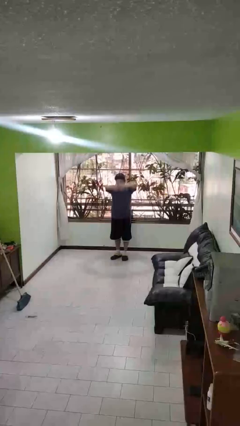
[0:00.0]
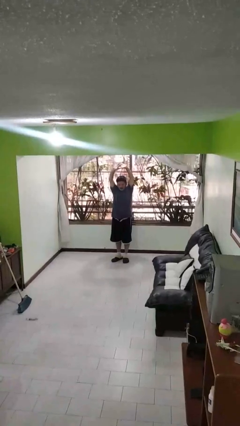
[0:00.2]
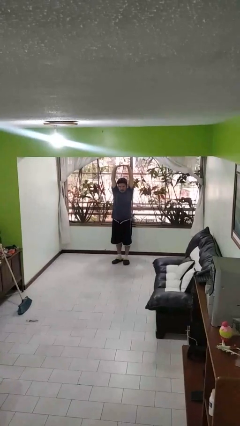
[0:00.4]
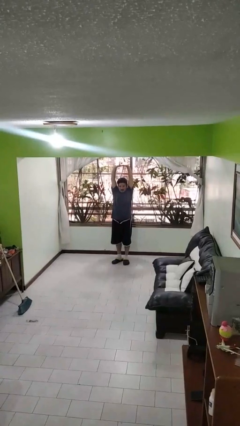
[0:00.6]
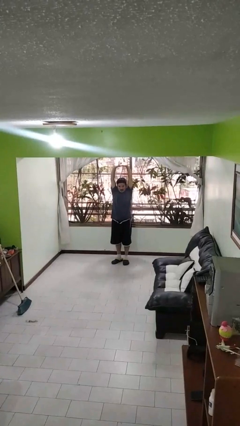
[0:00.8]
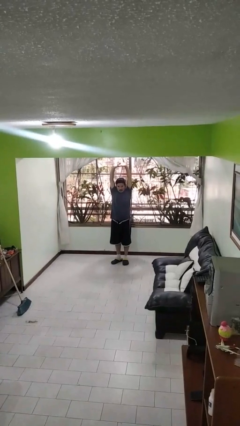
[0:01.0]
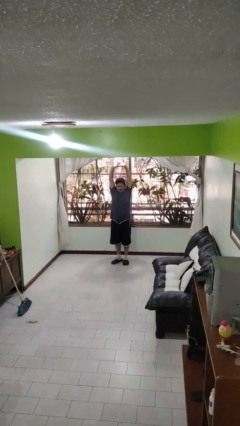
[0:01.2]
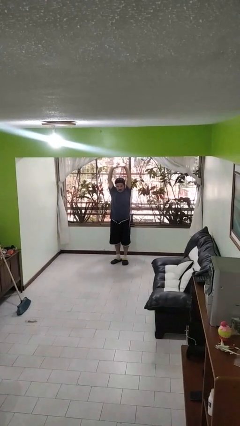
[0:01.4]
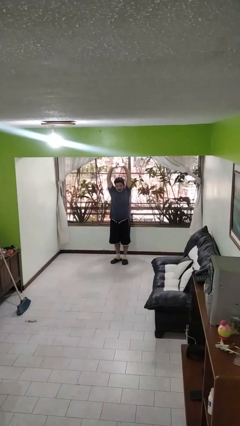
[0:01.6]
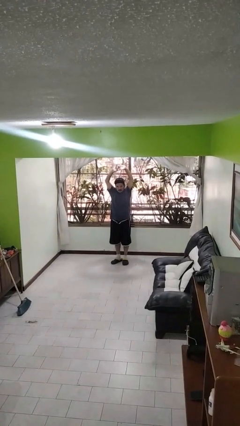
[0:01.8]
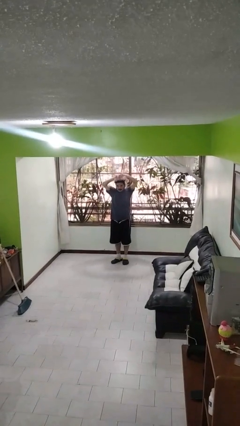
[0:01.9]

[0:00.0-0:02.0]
person stretches arms over head

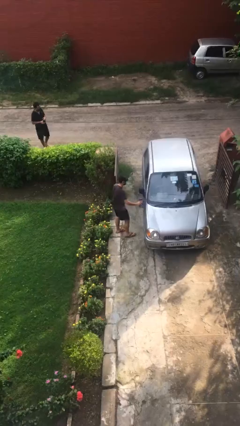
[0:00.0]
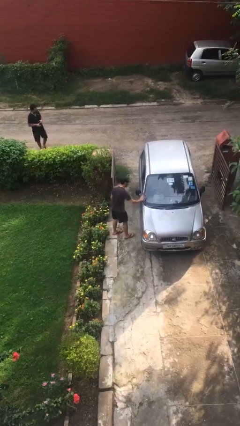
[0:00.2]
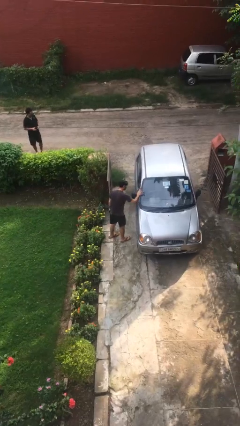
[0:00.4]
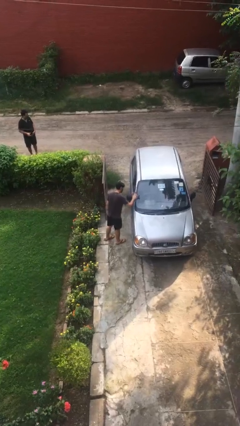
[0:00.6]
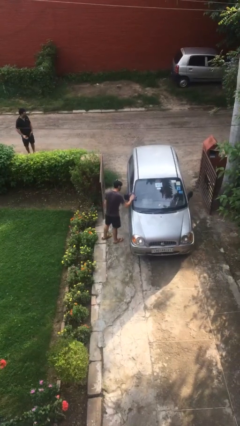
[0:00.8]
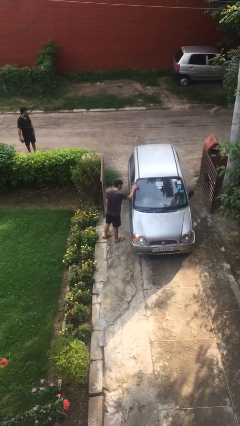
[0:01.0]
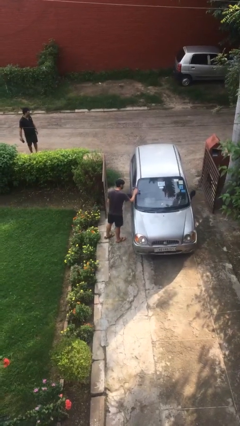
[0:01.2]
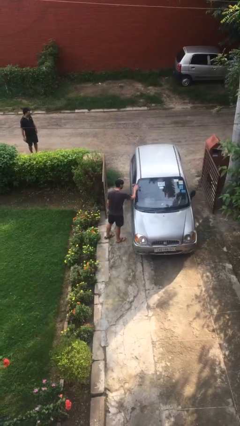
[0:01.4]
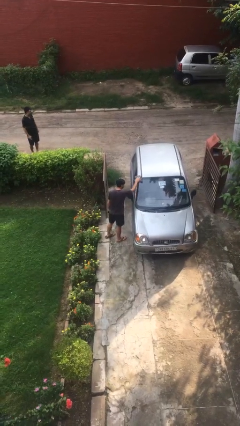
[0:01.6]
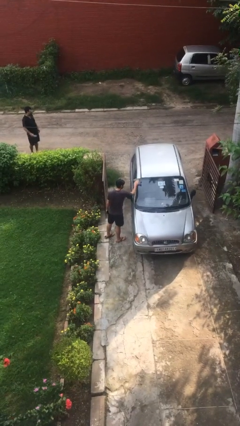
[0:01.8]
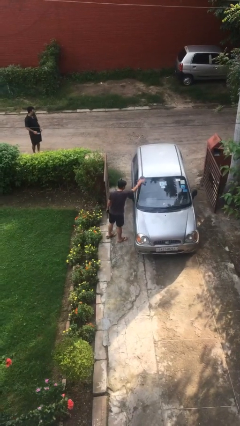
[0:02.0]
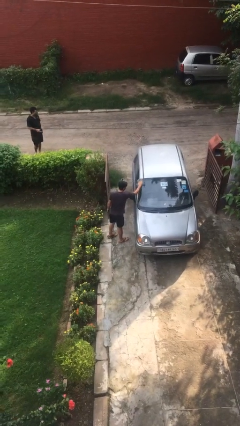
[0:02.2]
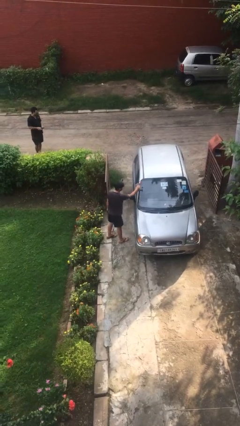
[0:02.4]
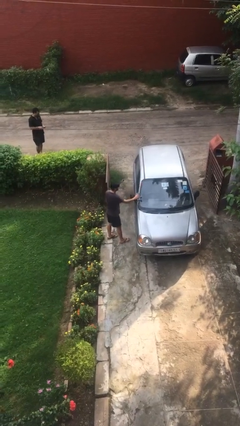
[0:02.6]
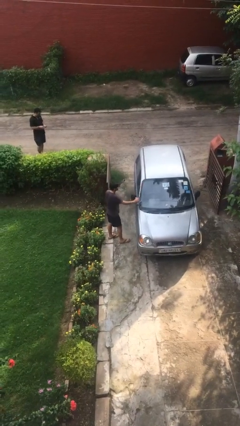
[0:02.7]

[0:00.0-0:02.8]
person polishes car with rag

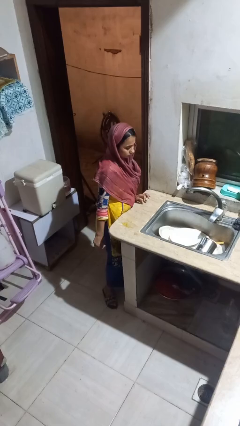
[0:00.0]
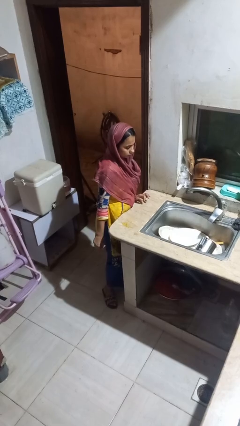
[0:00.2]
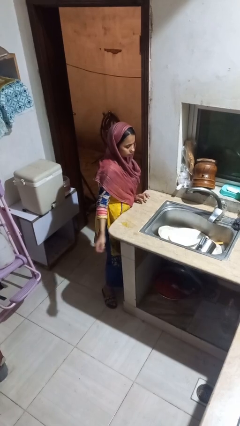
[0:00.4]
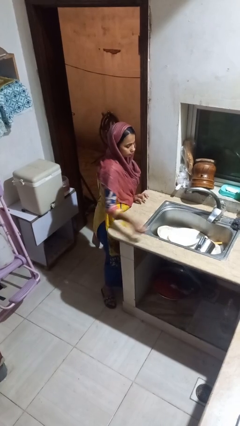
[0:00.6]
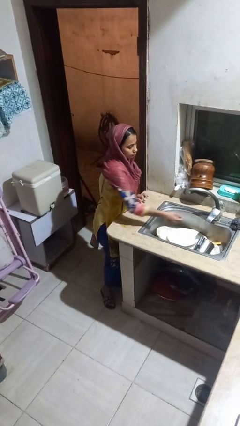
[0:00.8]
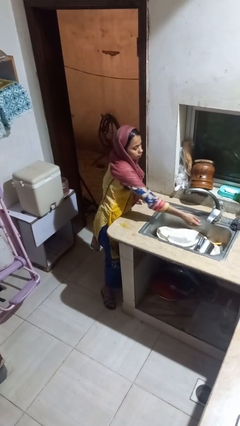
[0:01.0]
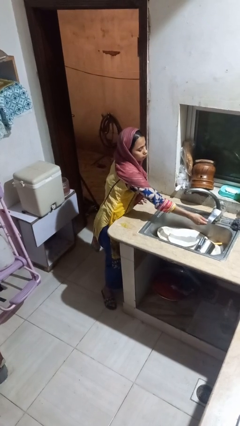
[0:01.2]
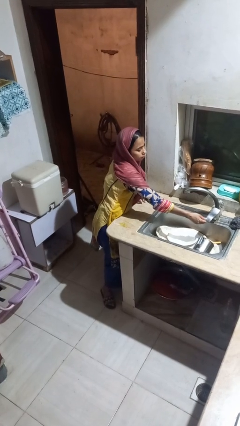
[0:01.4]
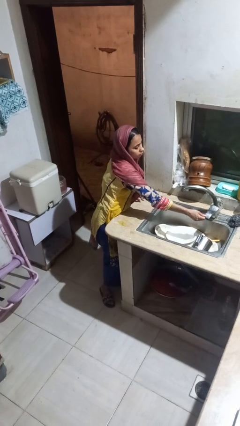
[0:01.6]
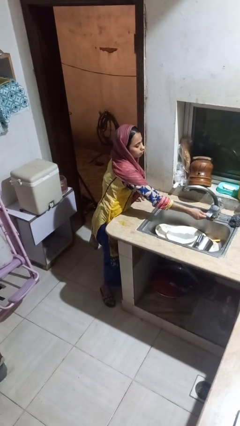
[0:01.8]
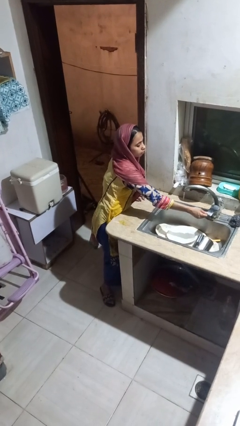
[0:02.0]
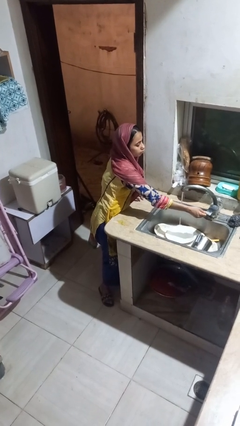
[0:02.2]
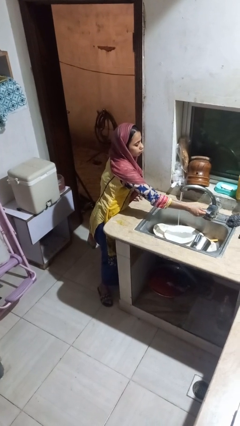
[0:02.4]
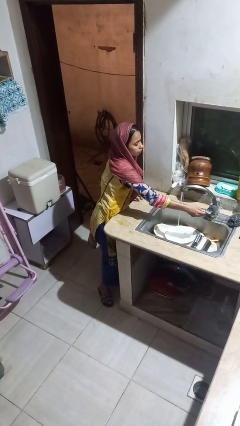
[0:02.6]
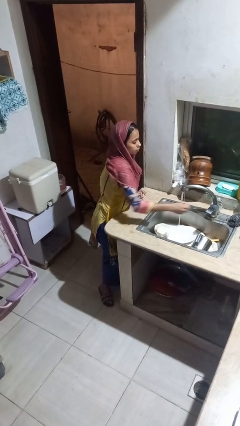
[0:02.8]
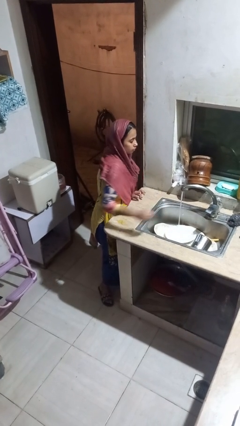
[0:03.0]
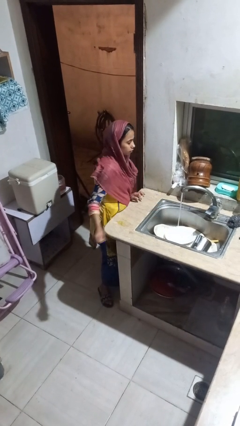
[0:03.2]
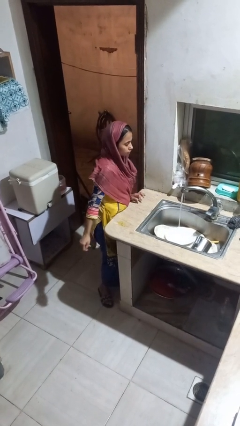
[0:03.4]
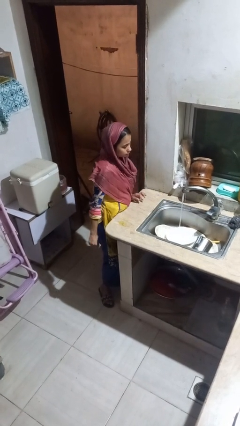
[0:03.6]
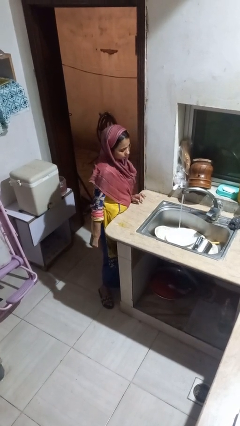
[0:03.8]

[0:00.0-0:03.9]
person turns on faucet

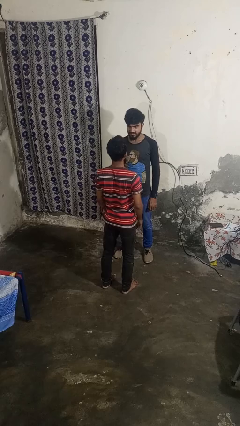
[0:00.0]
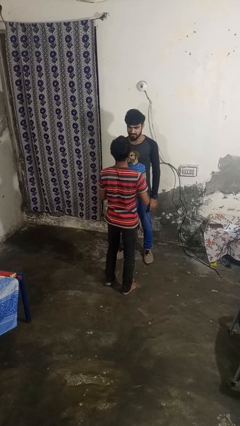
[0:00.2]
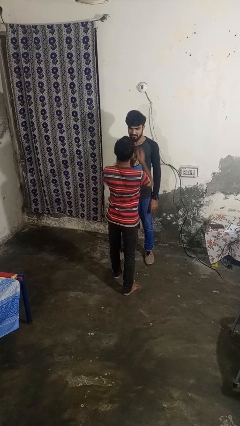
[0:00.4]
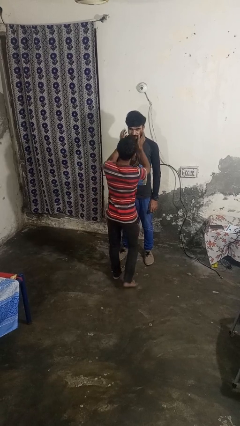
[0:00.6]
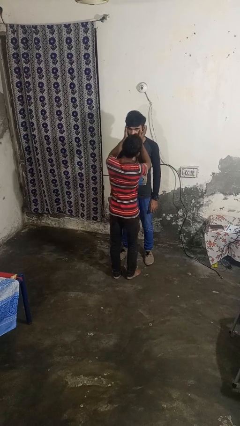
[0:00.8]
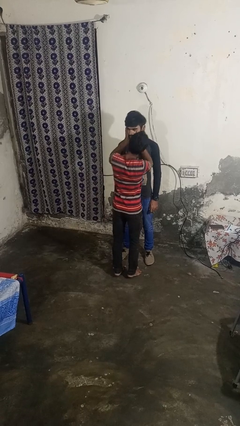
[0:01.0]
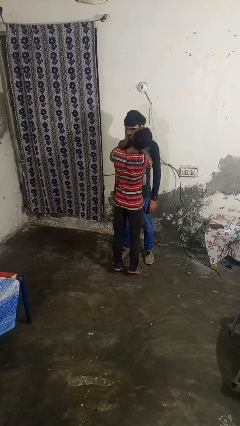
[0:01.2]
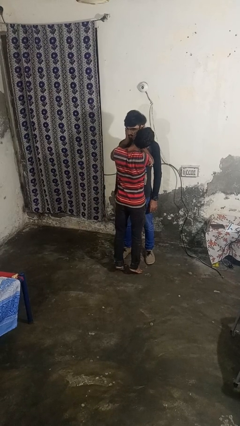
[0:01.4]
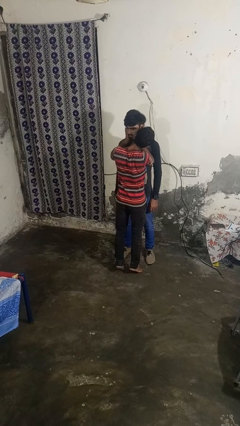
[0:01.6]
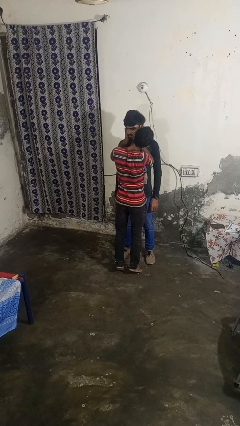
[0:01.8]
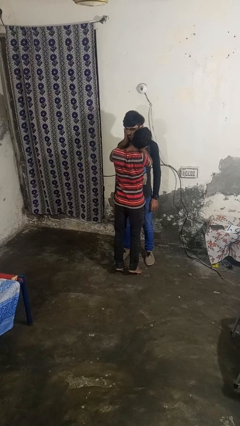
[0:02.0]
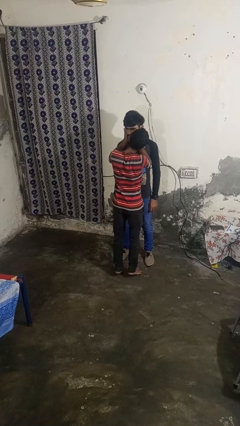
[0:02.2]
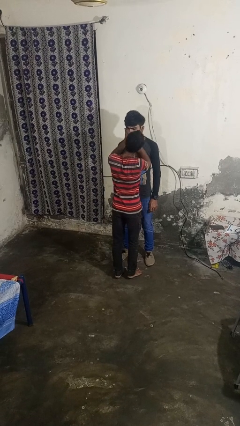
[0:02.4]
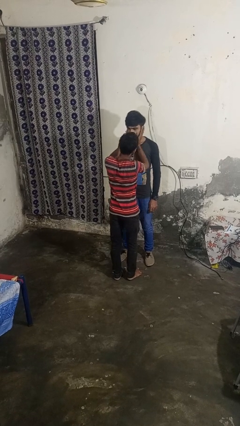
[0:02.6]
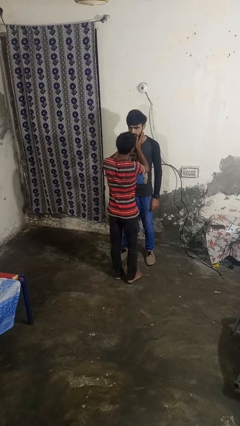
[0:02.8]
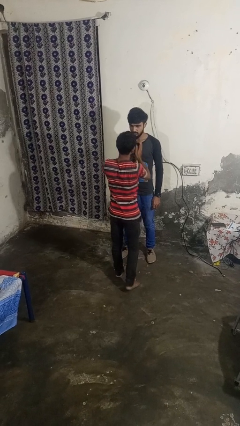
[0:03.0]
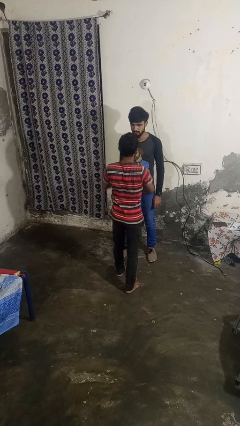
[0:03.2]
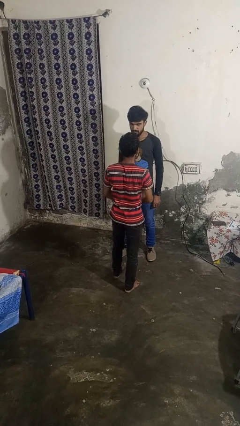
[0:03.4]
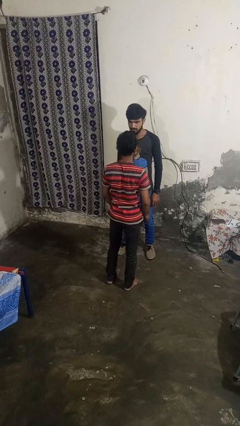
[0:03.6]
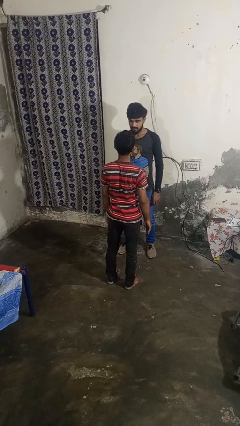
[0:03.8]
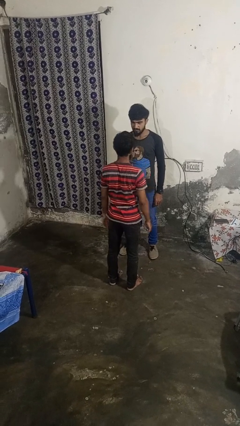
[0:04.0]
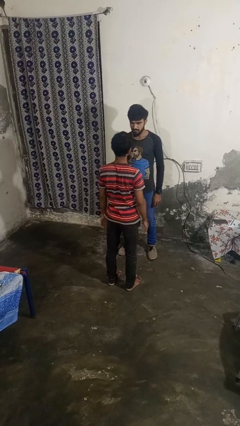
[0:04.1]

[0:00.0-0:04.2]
person kisses cheek of person

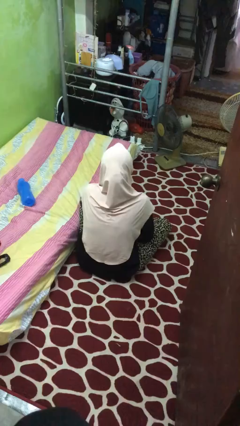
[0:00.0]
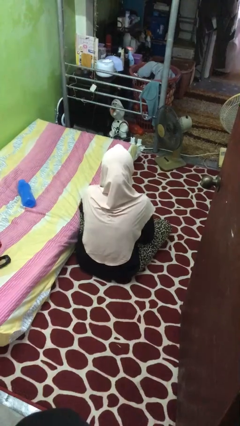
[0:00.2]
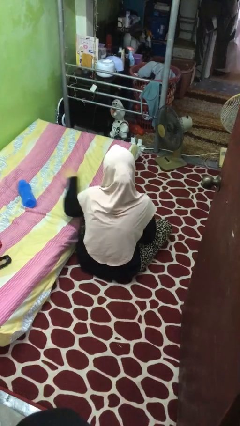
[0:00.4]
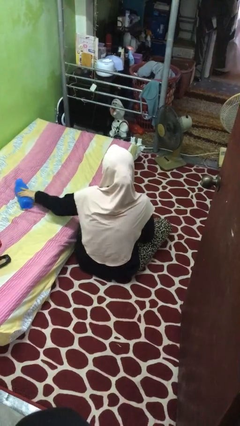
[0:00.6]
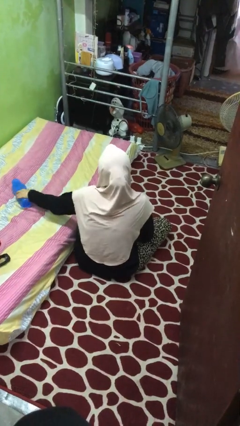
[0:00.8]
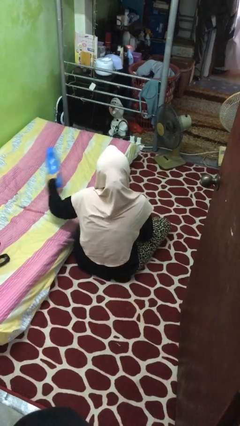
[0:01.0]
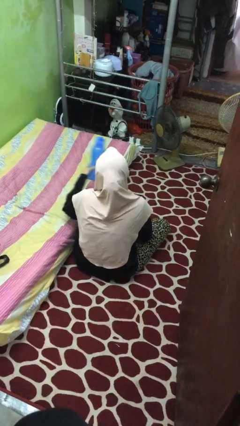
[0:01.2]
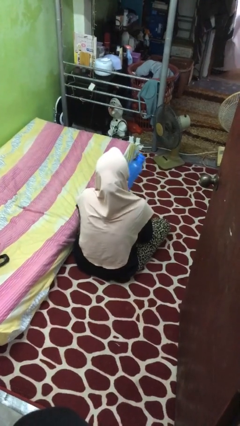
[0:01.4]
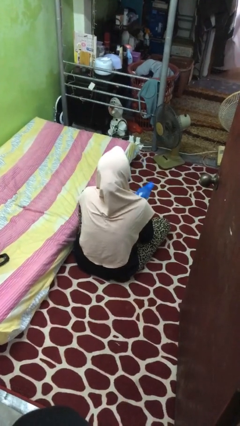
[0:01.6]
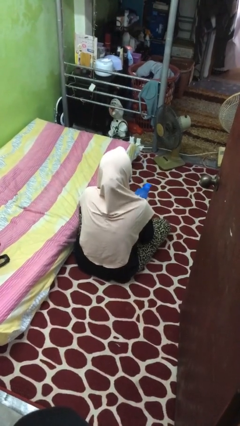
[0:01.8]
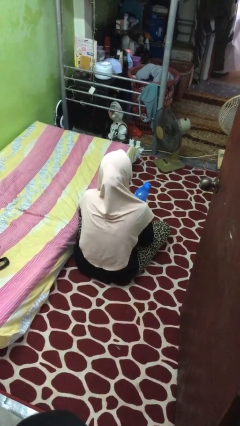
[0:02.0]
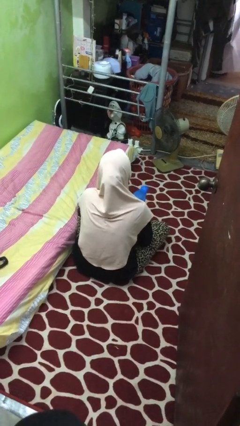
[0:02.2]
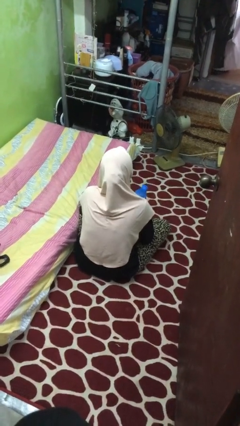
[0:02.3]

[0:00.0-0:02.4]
person picks up object from bed

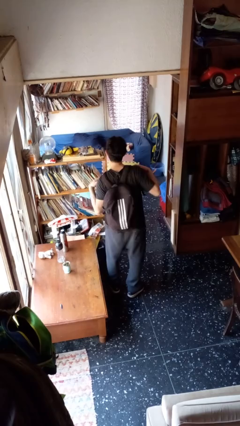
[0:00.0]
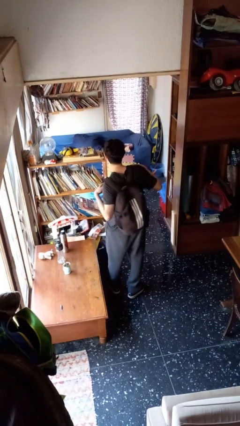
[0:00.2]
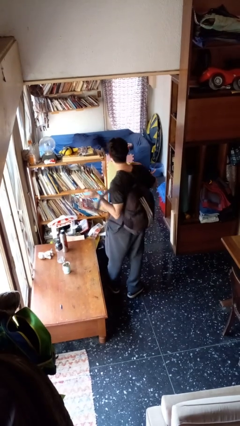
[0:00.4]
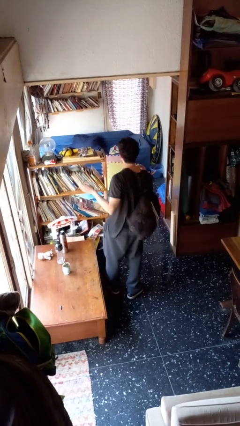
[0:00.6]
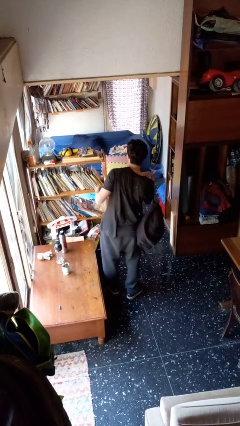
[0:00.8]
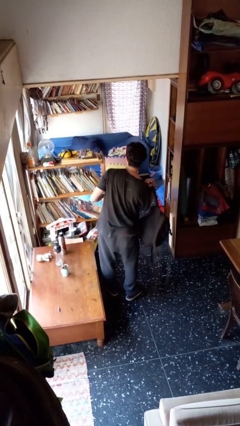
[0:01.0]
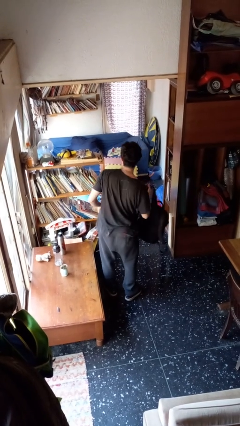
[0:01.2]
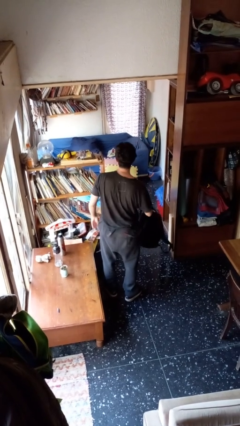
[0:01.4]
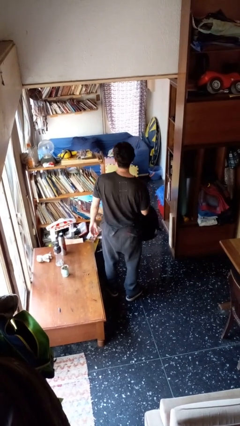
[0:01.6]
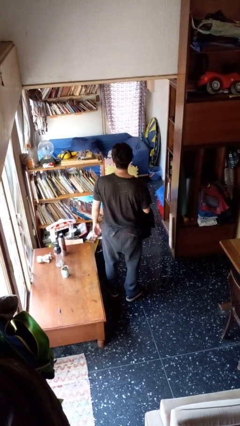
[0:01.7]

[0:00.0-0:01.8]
person takes off backpack

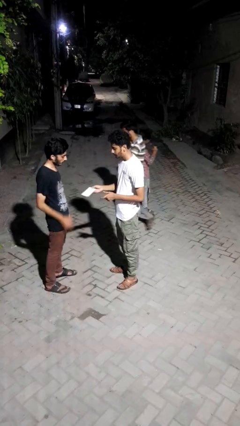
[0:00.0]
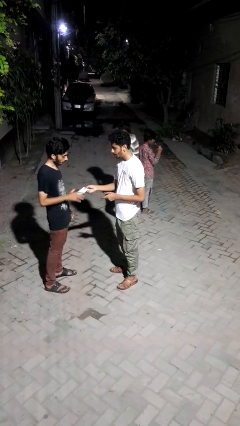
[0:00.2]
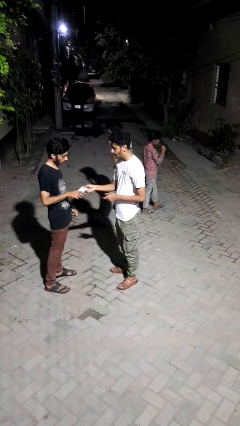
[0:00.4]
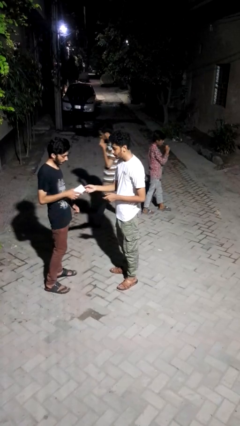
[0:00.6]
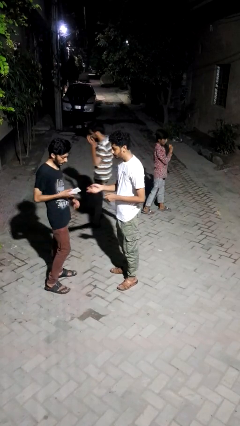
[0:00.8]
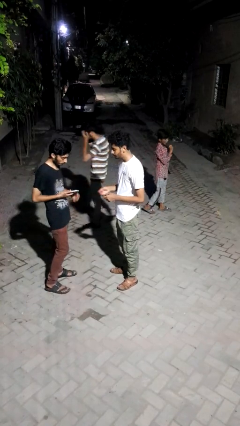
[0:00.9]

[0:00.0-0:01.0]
person transfers object to person
